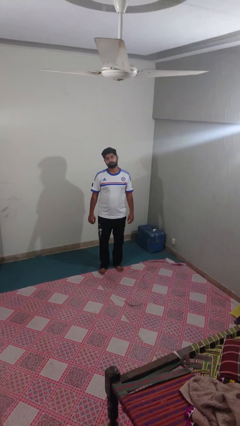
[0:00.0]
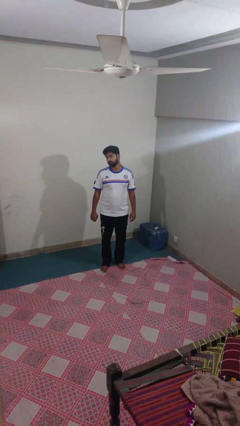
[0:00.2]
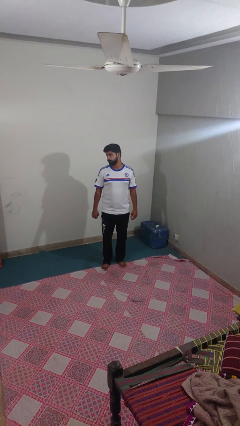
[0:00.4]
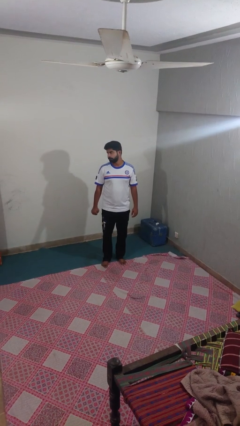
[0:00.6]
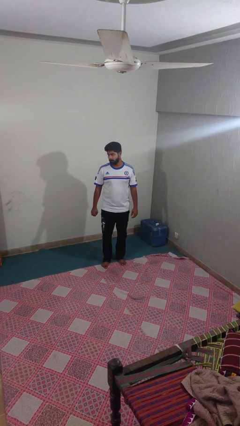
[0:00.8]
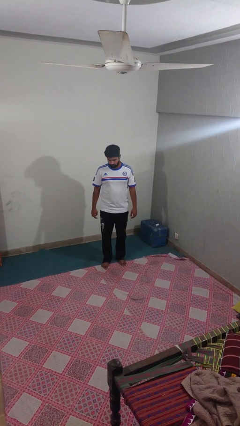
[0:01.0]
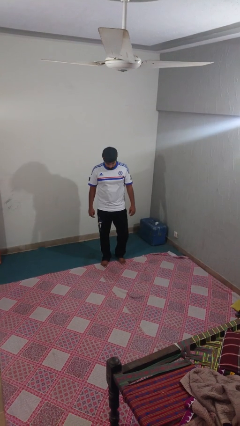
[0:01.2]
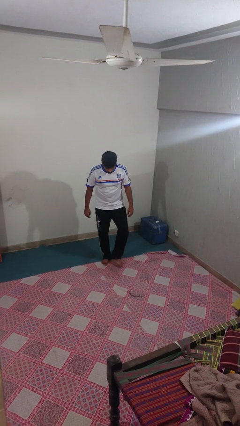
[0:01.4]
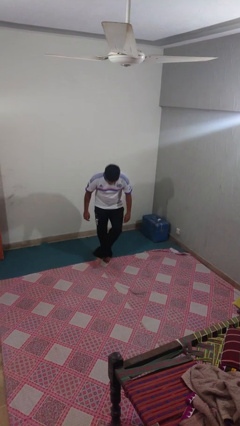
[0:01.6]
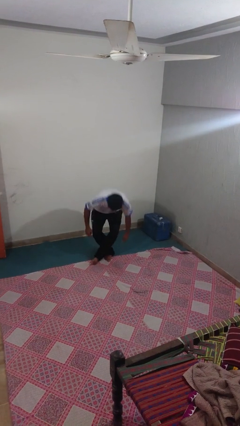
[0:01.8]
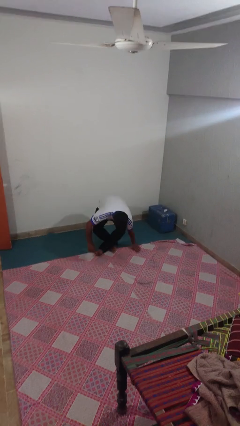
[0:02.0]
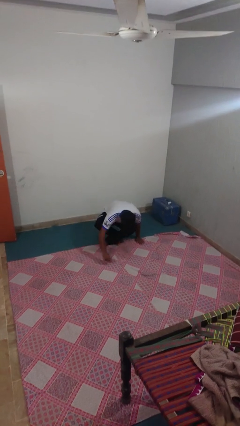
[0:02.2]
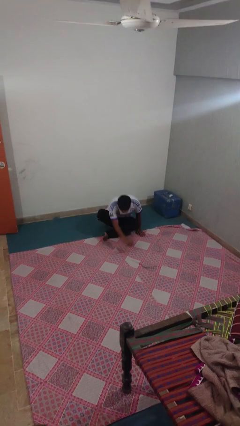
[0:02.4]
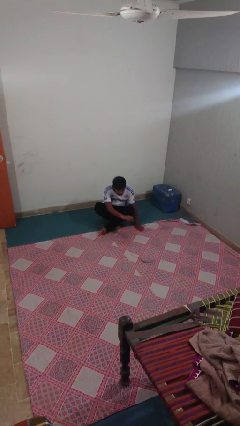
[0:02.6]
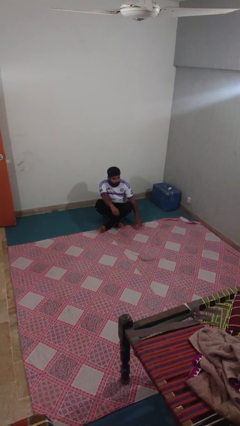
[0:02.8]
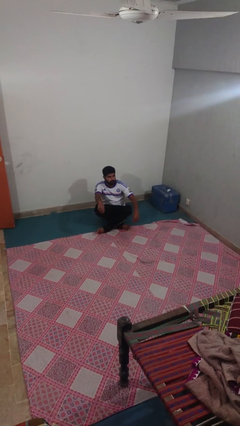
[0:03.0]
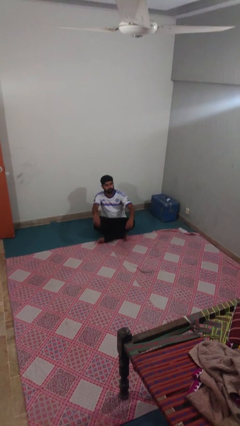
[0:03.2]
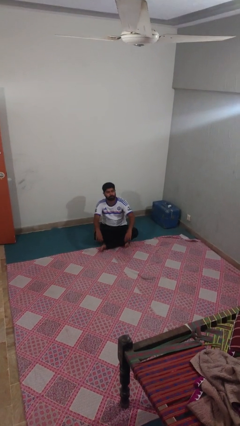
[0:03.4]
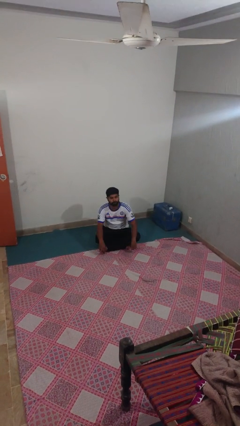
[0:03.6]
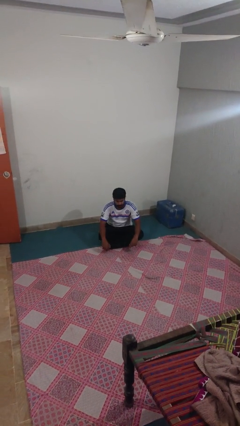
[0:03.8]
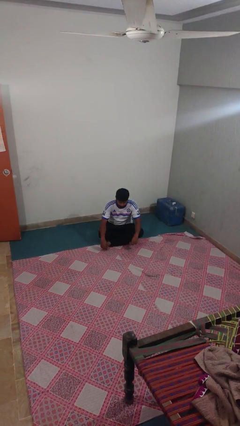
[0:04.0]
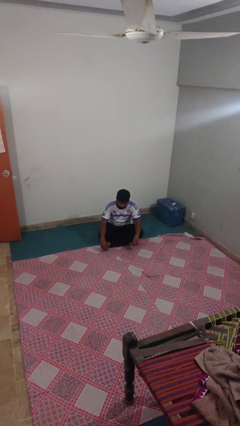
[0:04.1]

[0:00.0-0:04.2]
person sits crisscross

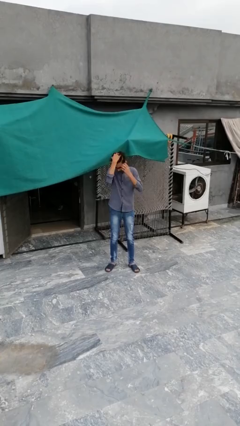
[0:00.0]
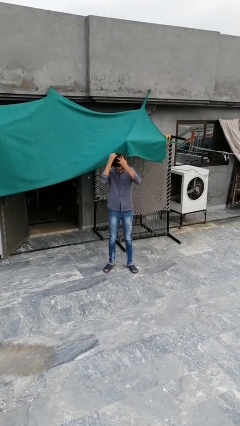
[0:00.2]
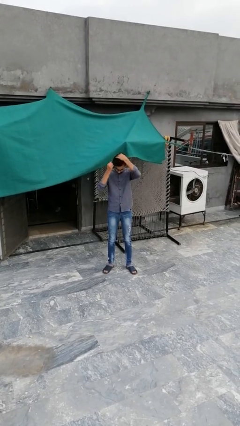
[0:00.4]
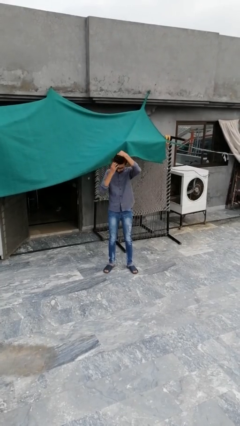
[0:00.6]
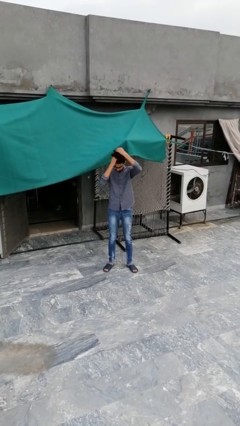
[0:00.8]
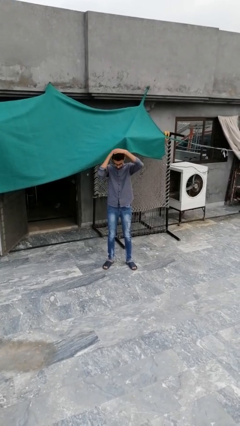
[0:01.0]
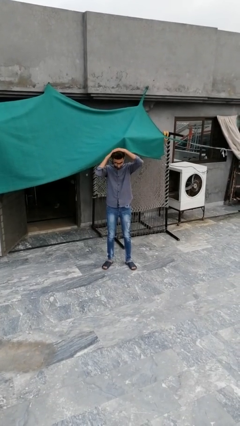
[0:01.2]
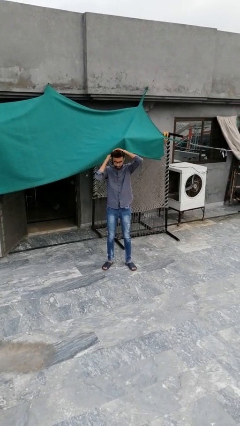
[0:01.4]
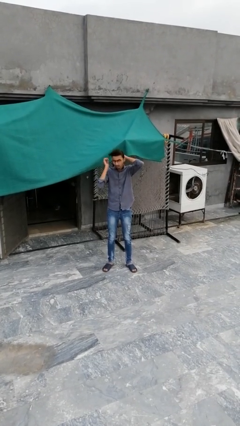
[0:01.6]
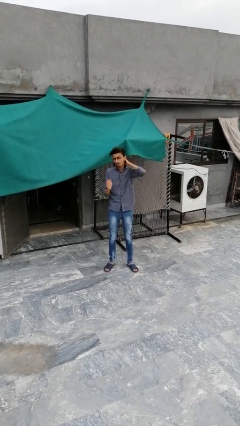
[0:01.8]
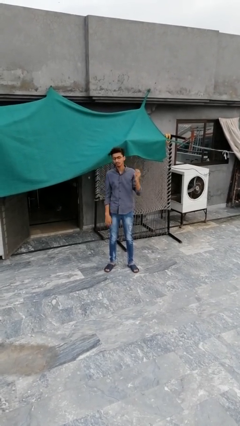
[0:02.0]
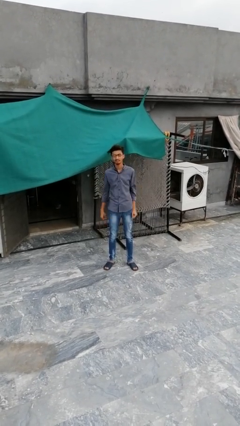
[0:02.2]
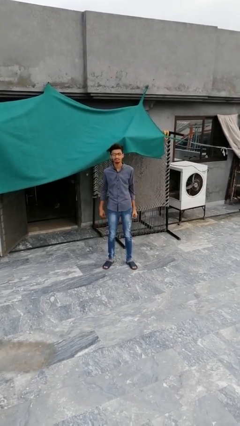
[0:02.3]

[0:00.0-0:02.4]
person strokes hair

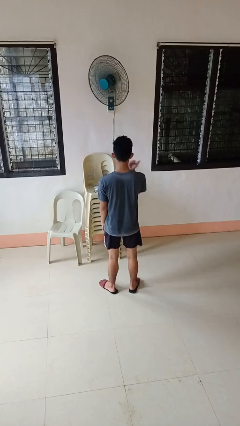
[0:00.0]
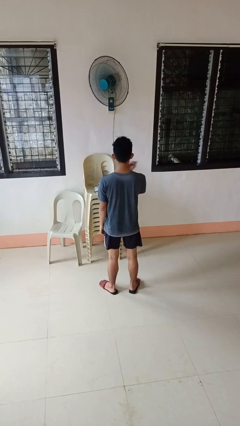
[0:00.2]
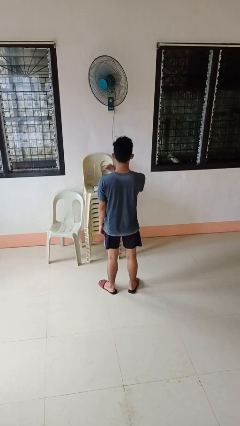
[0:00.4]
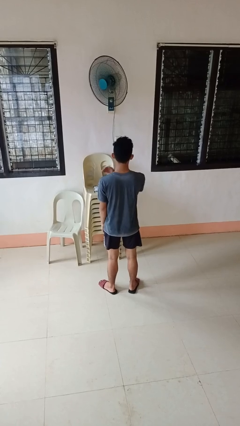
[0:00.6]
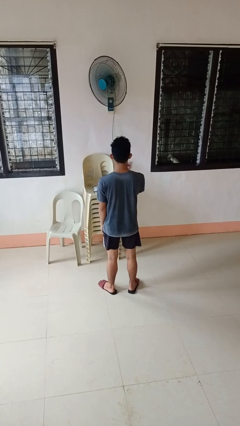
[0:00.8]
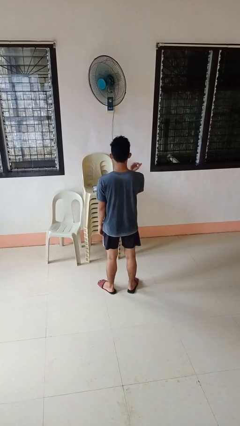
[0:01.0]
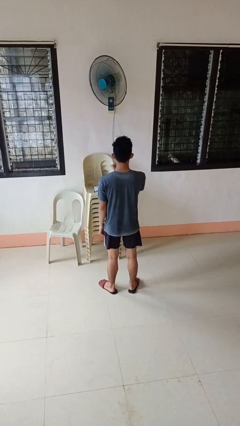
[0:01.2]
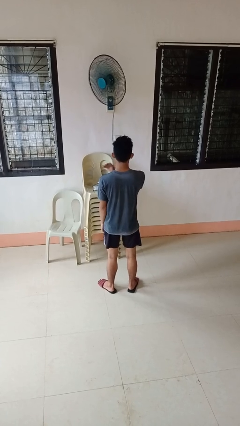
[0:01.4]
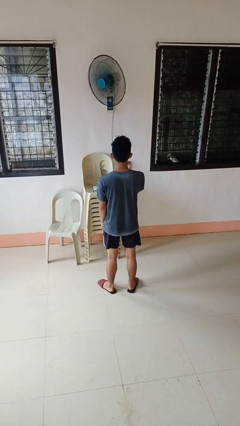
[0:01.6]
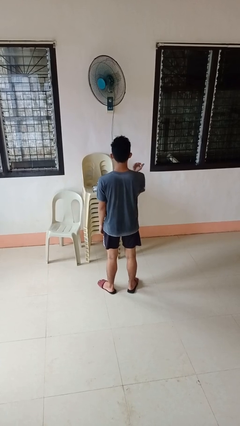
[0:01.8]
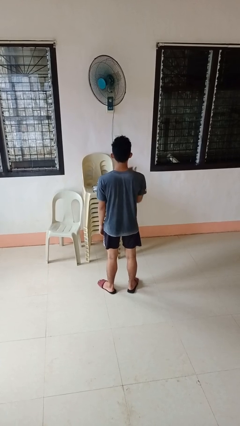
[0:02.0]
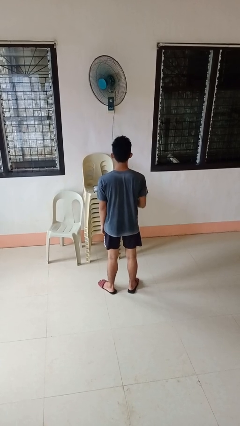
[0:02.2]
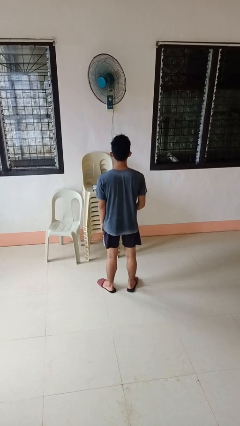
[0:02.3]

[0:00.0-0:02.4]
person gestures cut

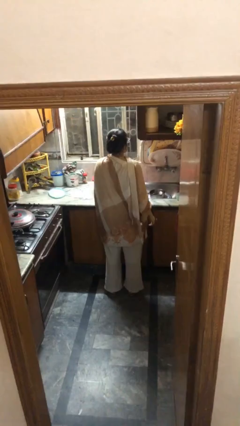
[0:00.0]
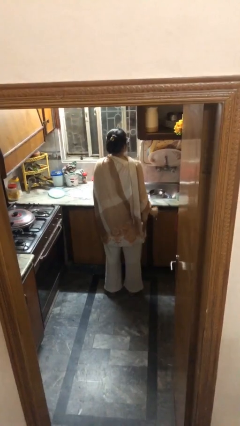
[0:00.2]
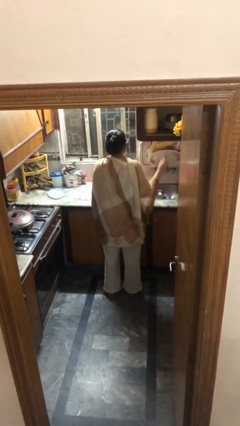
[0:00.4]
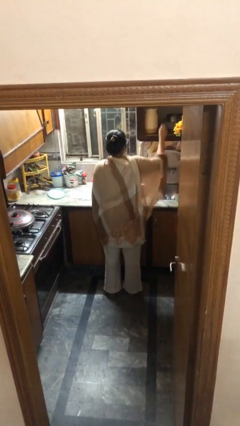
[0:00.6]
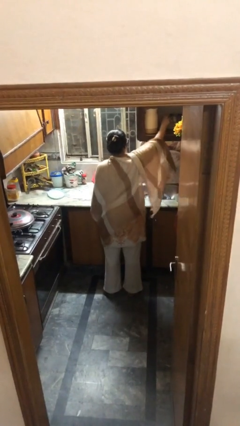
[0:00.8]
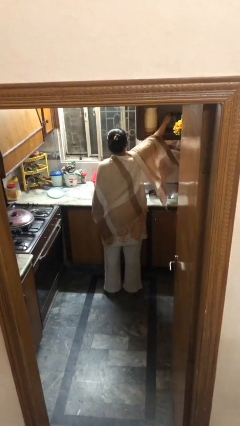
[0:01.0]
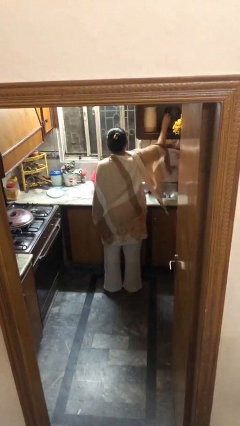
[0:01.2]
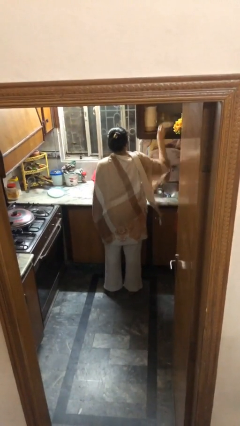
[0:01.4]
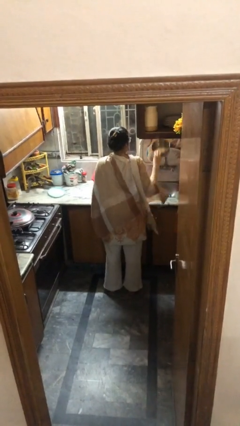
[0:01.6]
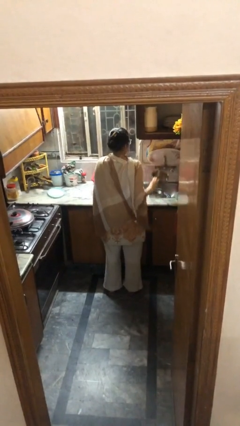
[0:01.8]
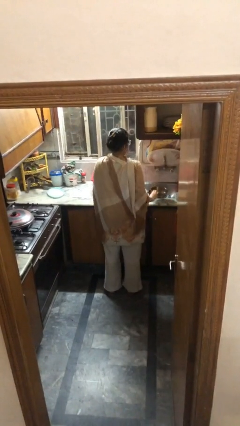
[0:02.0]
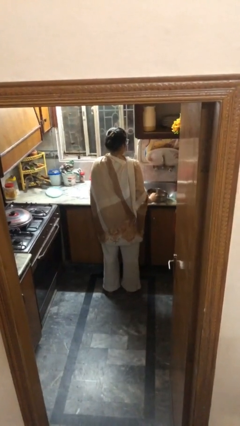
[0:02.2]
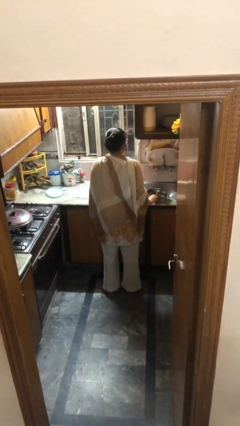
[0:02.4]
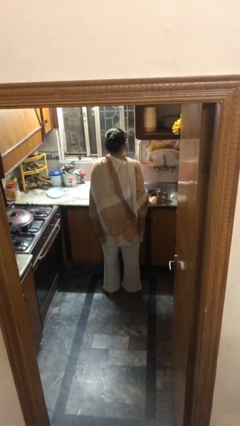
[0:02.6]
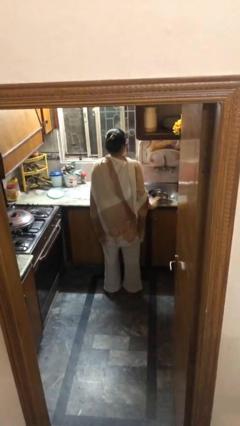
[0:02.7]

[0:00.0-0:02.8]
person takes object from cabinet

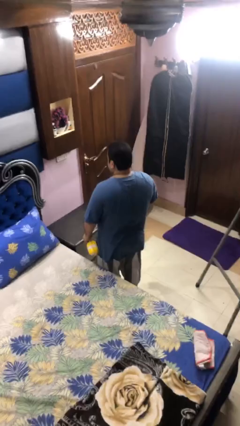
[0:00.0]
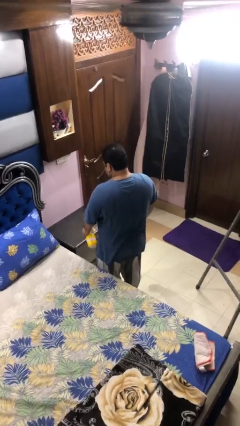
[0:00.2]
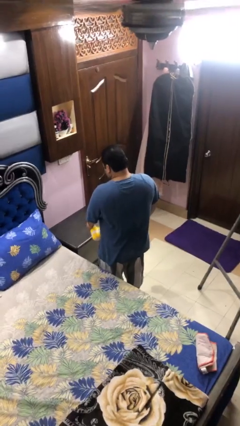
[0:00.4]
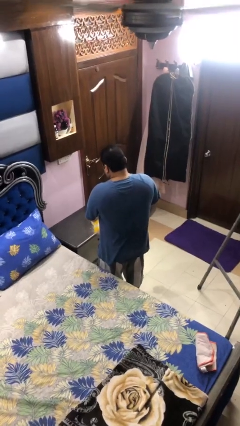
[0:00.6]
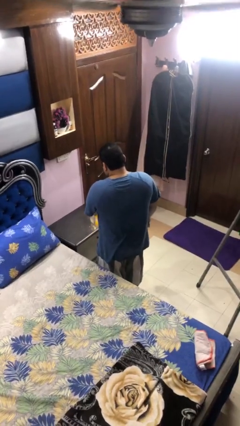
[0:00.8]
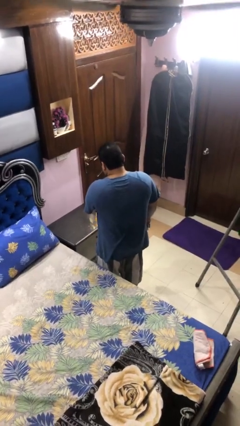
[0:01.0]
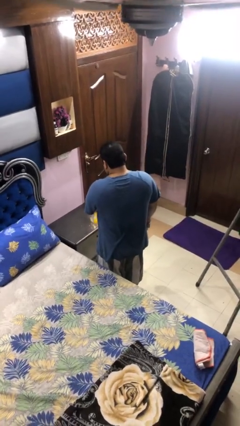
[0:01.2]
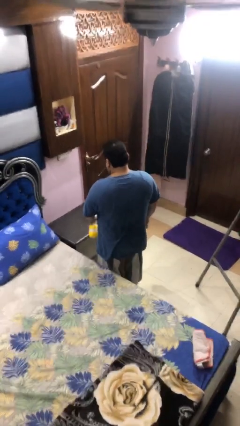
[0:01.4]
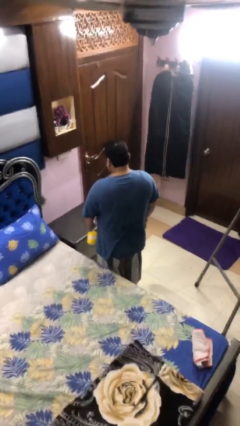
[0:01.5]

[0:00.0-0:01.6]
person sprays from bottle

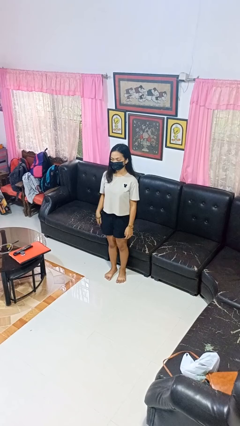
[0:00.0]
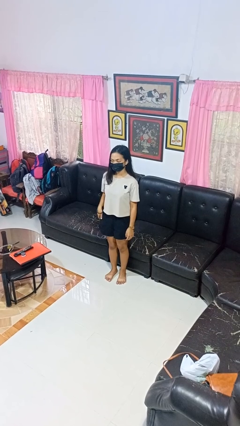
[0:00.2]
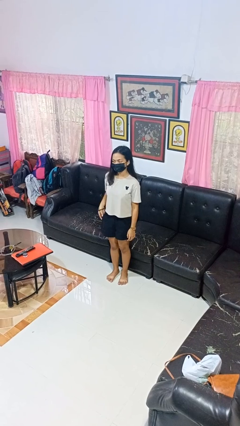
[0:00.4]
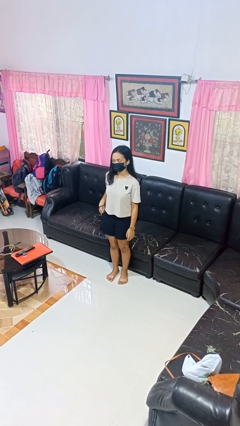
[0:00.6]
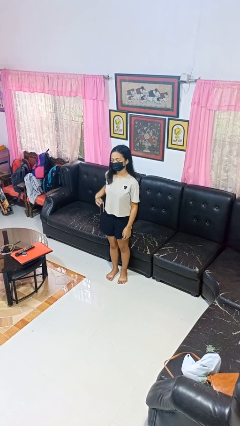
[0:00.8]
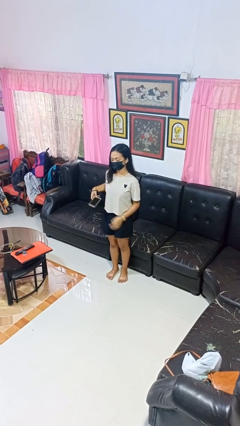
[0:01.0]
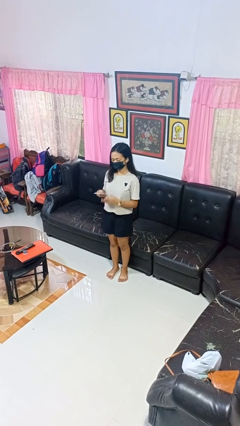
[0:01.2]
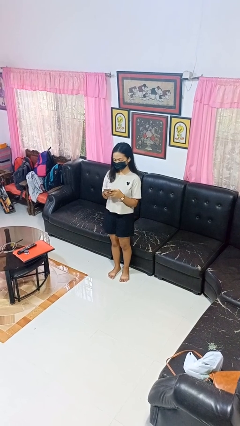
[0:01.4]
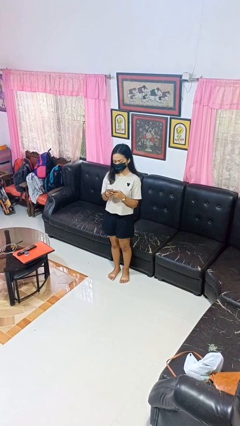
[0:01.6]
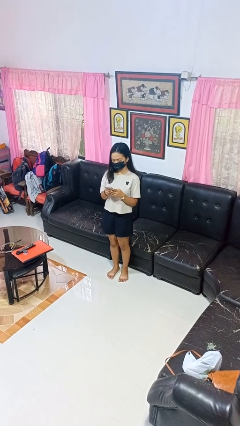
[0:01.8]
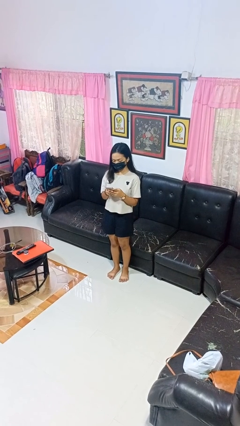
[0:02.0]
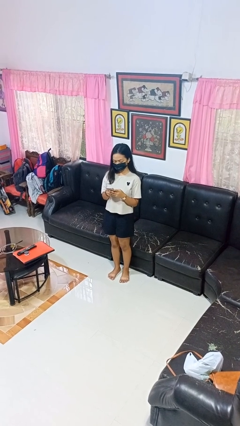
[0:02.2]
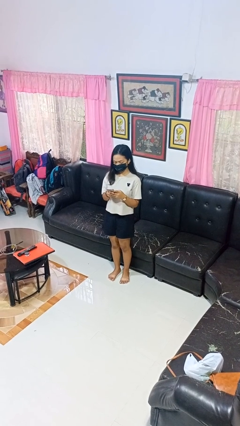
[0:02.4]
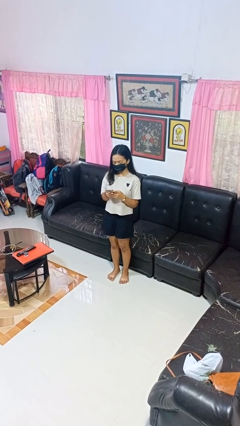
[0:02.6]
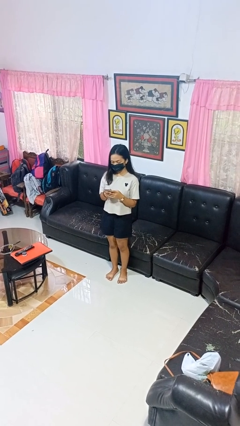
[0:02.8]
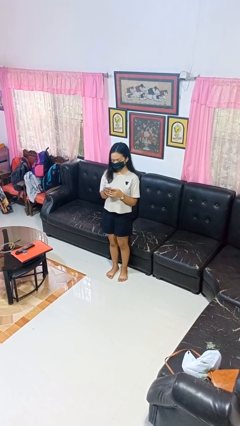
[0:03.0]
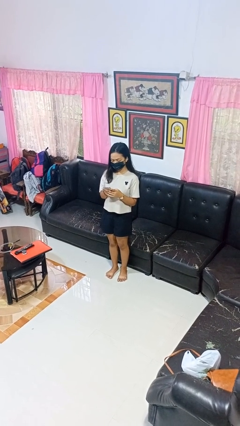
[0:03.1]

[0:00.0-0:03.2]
person takes phone from pocket

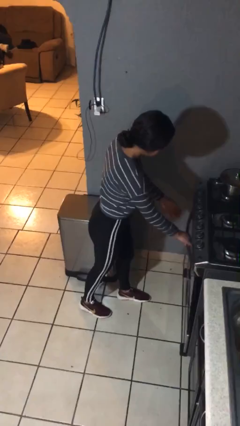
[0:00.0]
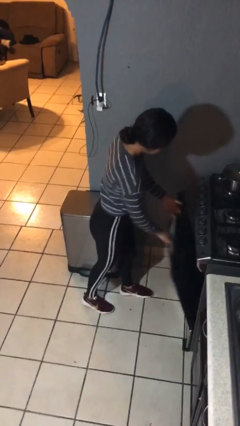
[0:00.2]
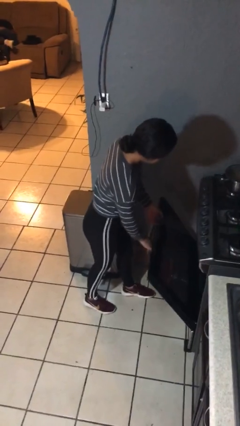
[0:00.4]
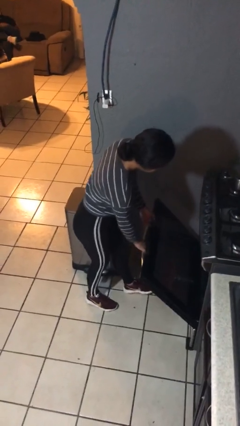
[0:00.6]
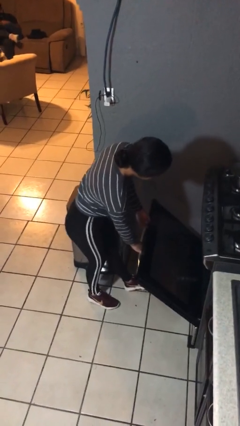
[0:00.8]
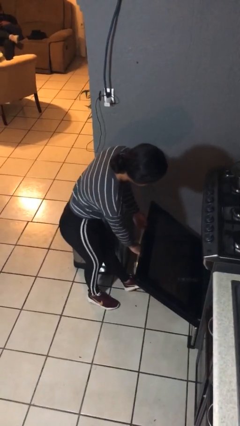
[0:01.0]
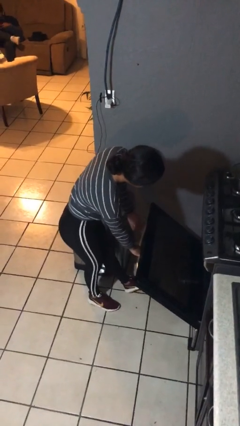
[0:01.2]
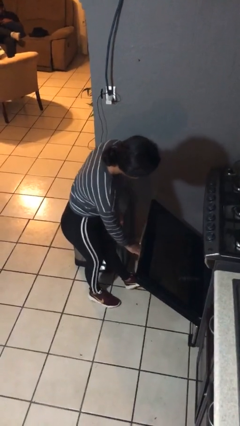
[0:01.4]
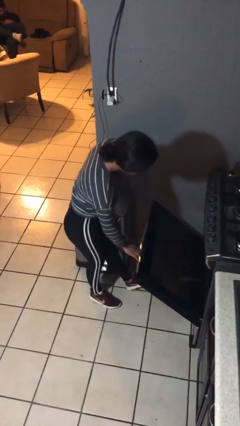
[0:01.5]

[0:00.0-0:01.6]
person opens oven door
